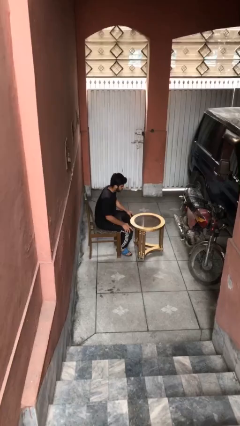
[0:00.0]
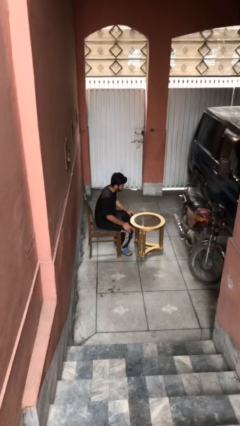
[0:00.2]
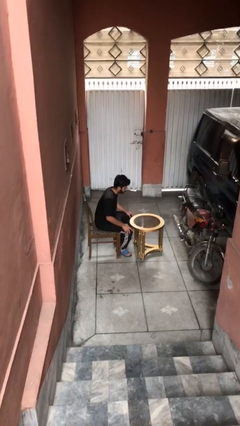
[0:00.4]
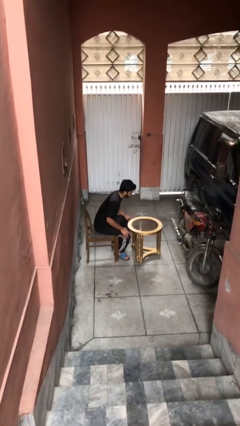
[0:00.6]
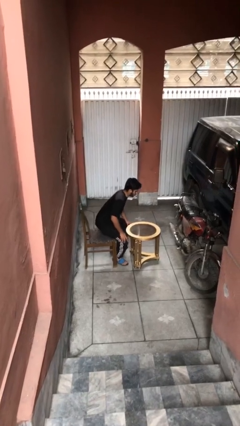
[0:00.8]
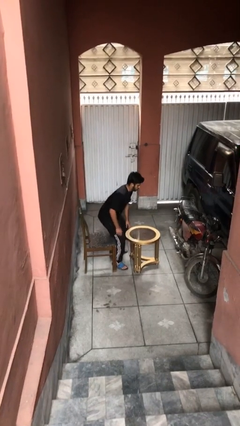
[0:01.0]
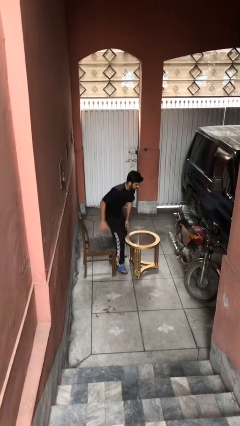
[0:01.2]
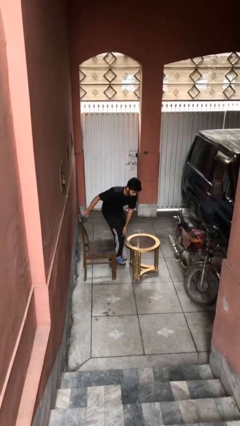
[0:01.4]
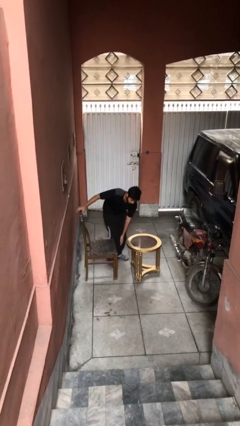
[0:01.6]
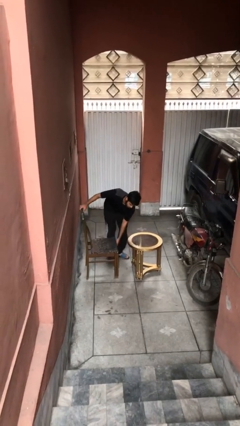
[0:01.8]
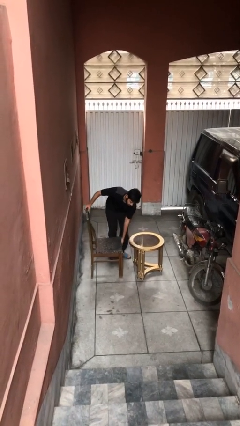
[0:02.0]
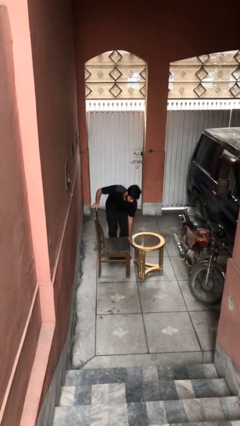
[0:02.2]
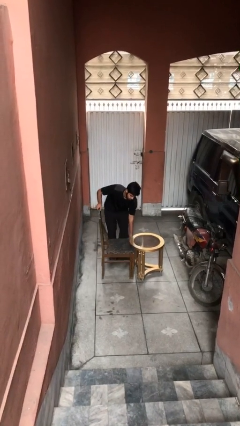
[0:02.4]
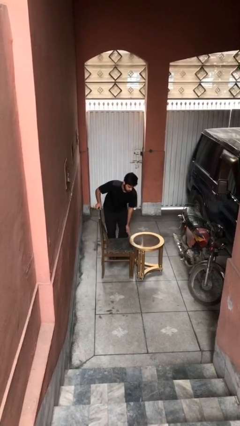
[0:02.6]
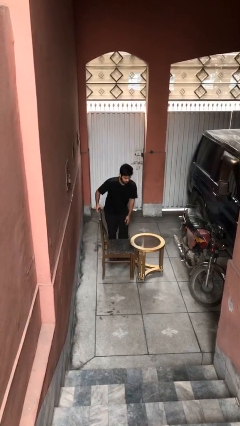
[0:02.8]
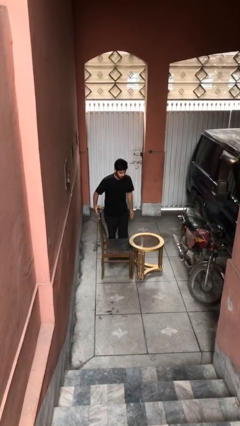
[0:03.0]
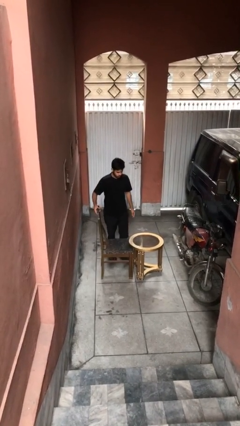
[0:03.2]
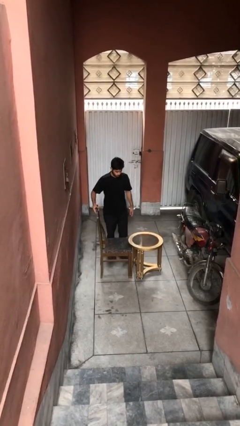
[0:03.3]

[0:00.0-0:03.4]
person stands up

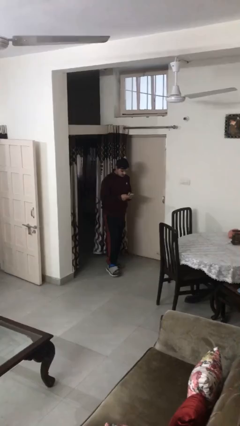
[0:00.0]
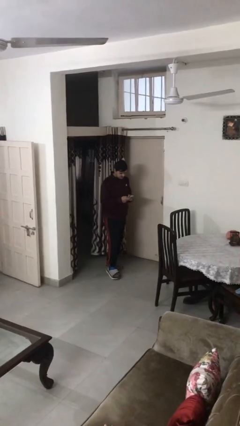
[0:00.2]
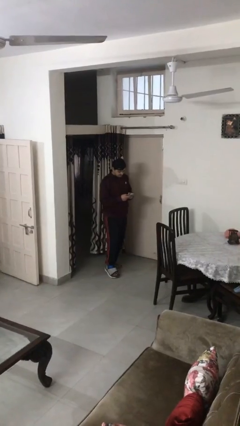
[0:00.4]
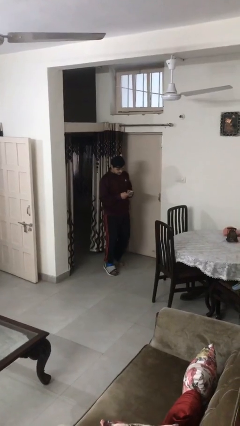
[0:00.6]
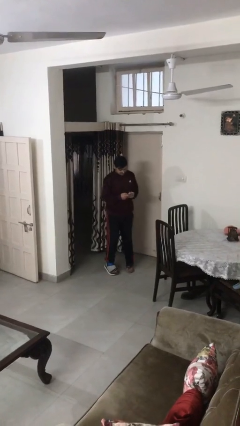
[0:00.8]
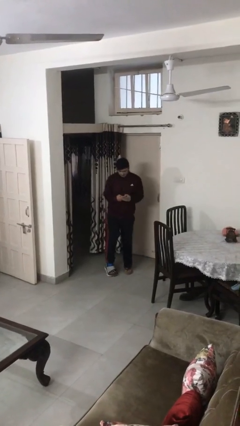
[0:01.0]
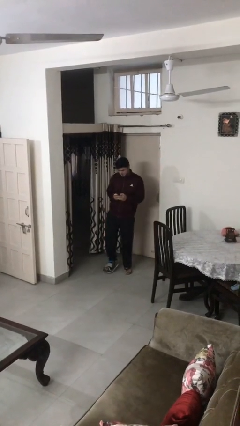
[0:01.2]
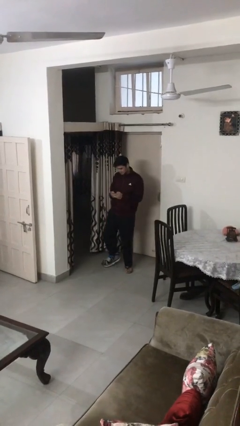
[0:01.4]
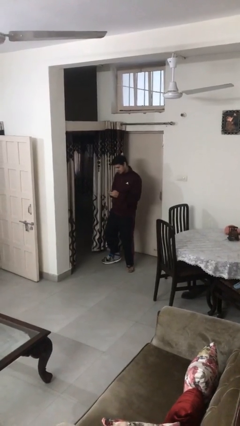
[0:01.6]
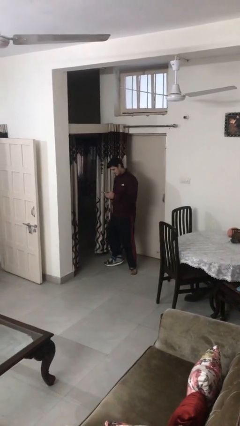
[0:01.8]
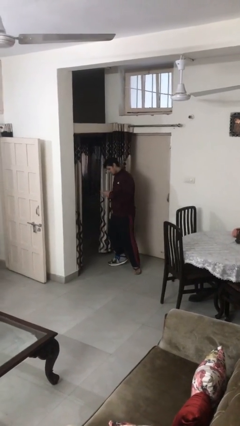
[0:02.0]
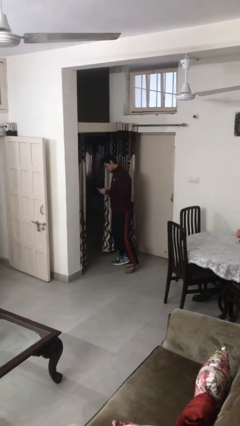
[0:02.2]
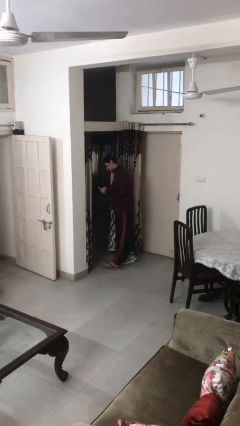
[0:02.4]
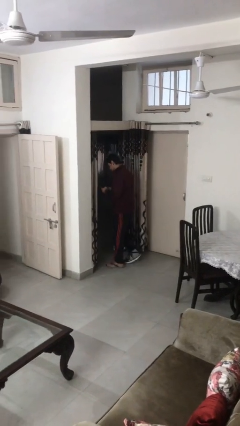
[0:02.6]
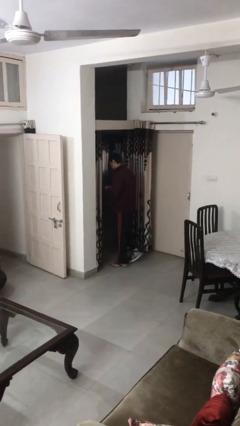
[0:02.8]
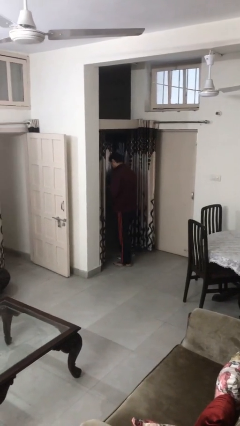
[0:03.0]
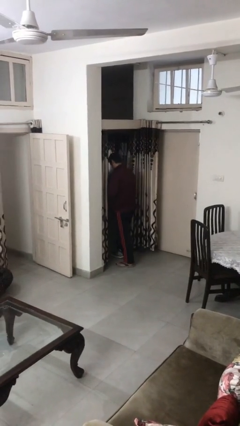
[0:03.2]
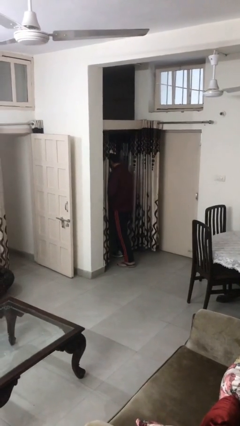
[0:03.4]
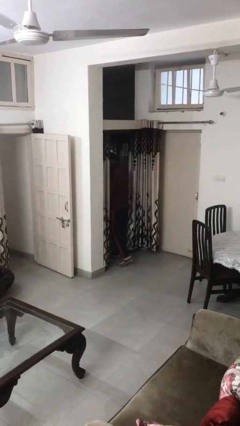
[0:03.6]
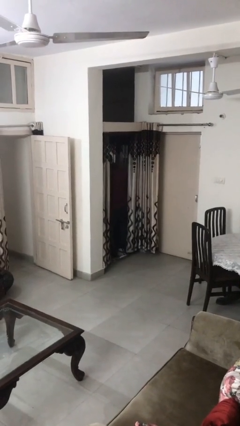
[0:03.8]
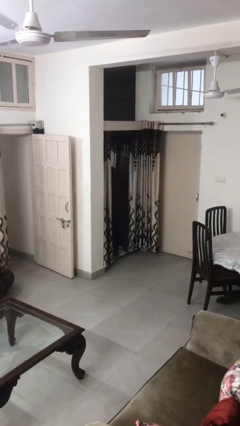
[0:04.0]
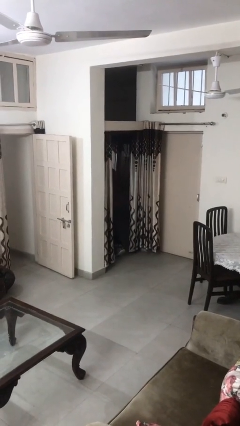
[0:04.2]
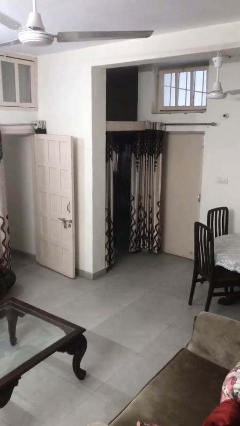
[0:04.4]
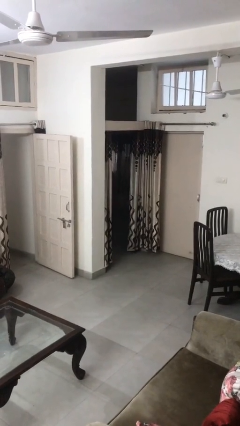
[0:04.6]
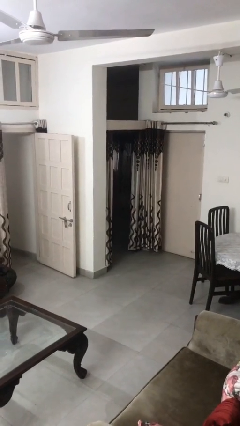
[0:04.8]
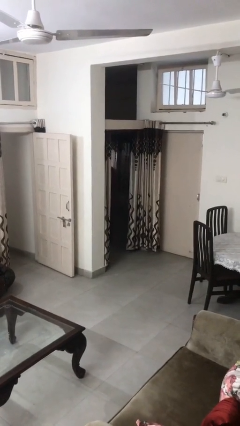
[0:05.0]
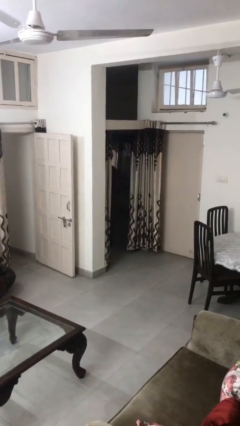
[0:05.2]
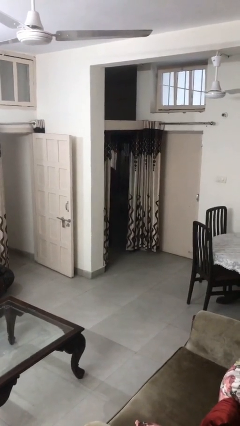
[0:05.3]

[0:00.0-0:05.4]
person exits scene through structure

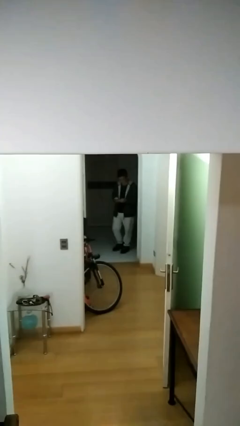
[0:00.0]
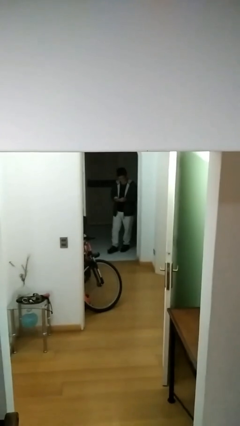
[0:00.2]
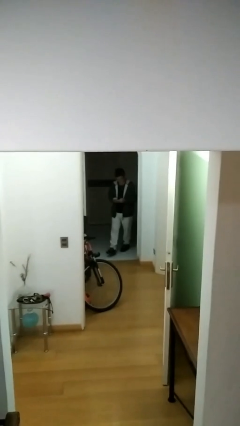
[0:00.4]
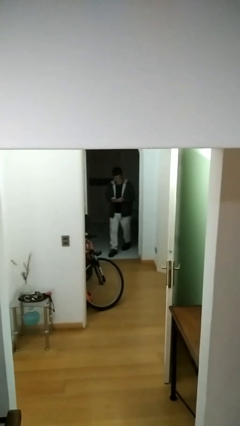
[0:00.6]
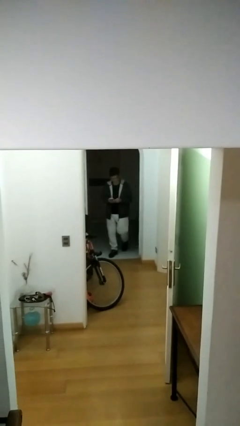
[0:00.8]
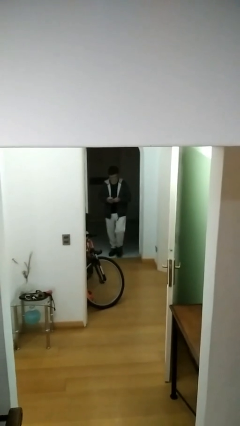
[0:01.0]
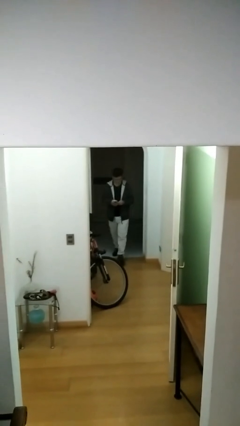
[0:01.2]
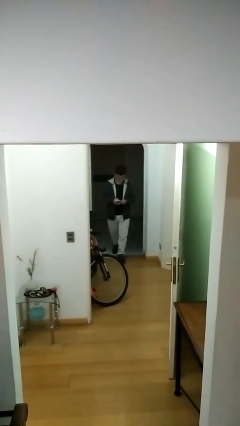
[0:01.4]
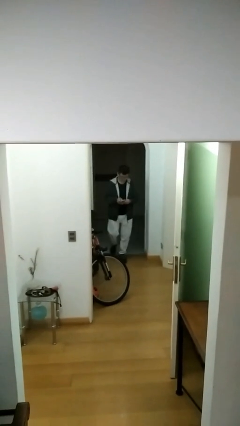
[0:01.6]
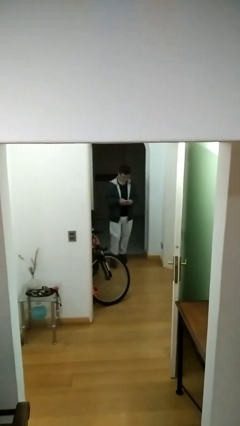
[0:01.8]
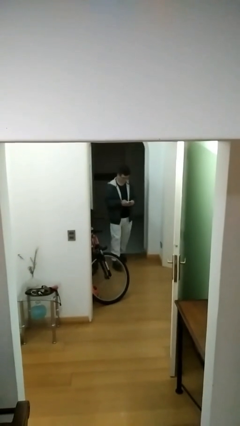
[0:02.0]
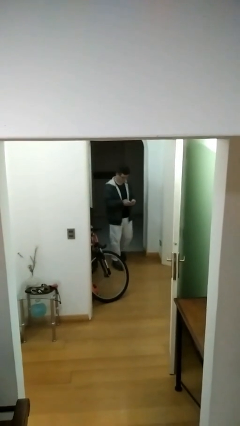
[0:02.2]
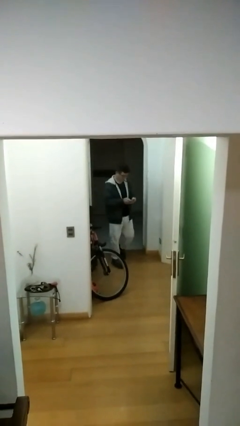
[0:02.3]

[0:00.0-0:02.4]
person enters scene through structure

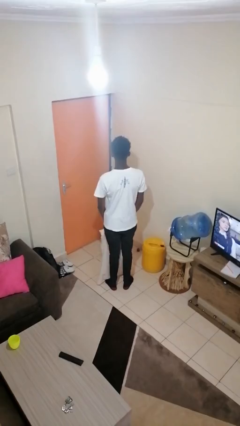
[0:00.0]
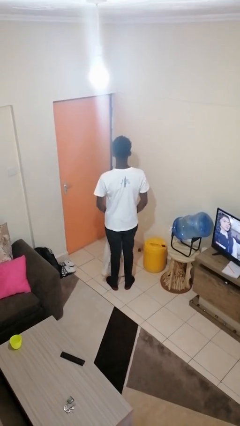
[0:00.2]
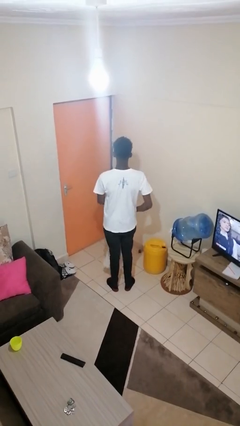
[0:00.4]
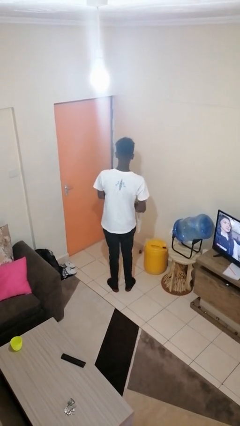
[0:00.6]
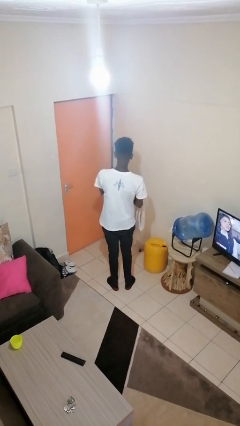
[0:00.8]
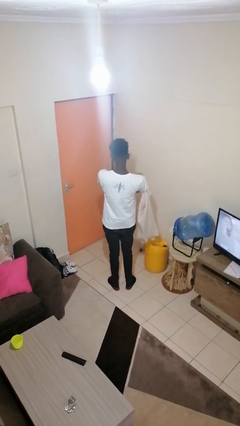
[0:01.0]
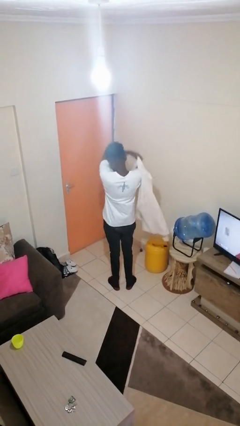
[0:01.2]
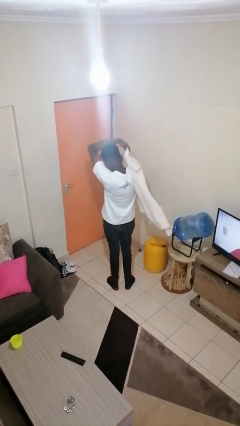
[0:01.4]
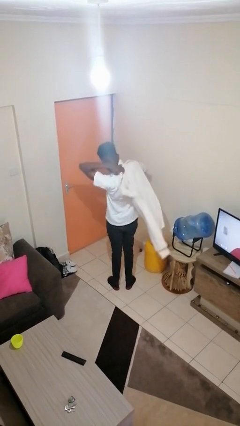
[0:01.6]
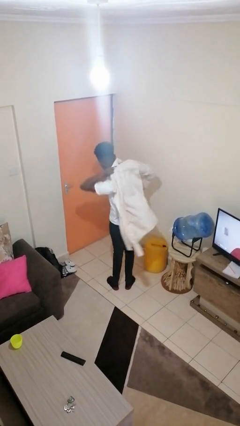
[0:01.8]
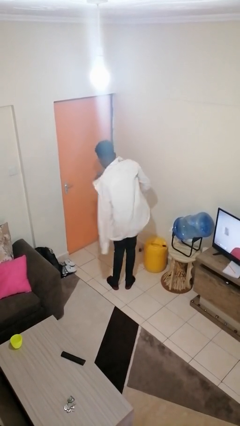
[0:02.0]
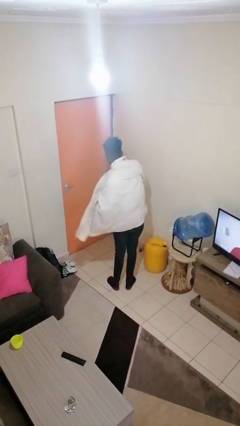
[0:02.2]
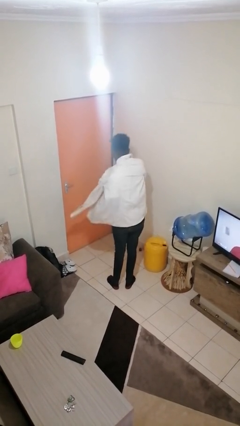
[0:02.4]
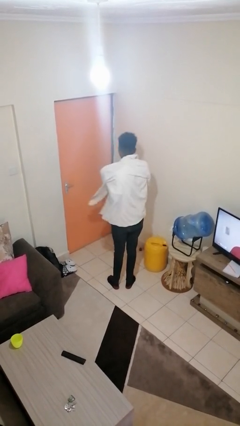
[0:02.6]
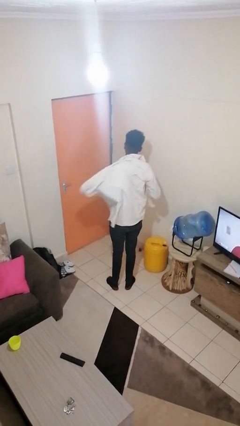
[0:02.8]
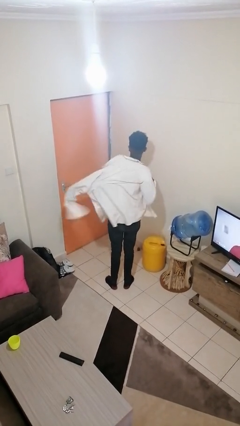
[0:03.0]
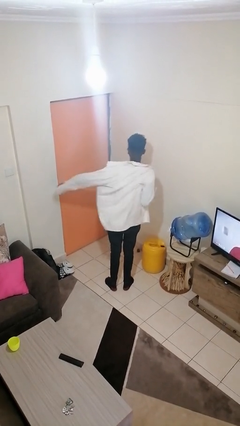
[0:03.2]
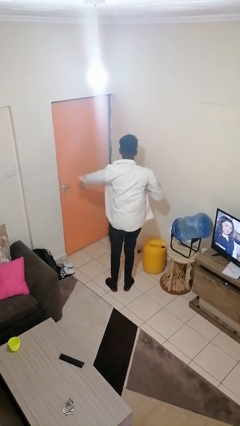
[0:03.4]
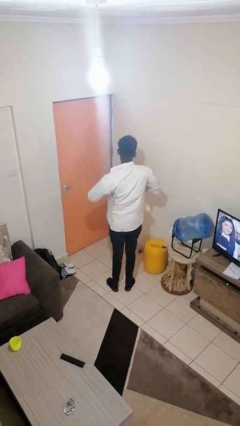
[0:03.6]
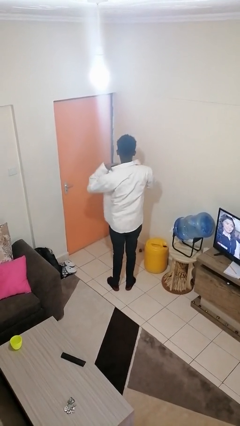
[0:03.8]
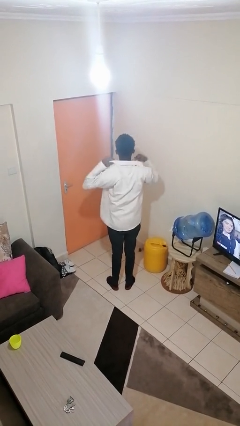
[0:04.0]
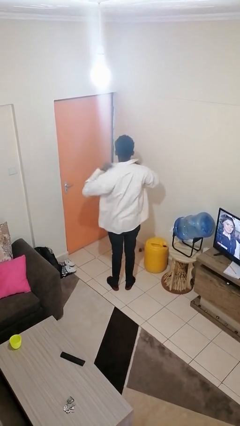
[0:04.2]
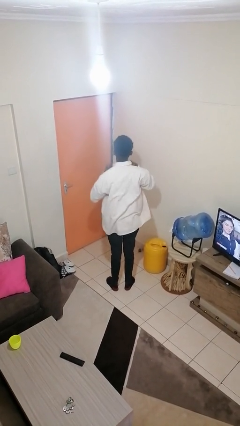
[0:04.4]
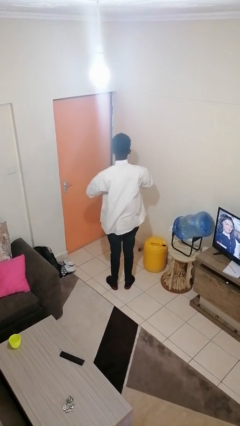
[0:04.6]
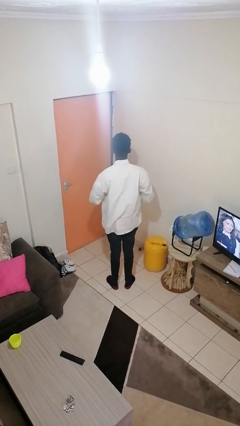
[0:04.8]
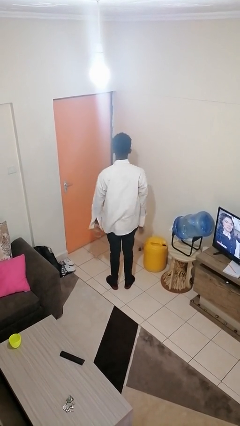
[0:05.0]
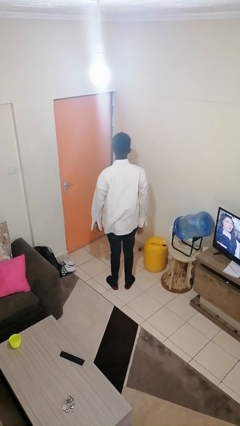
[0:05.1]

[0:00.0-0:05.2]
person puts on shirt

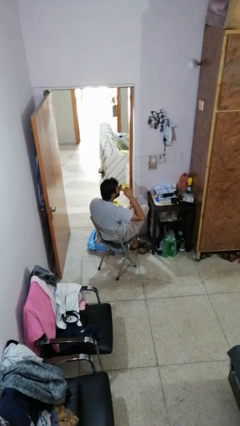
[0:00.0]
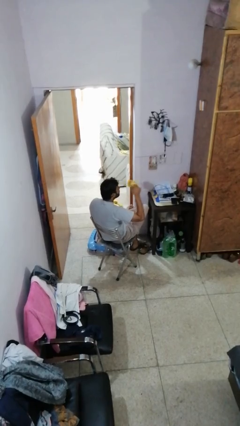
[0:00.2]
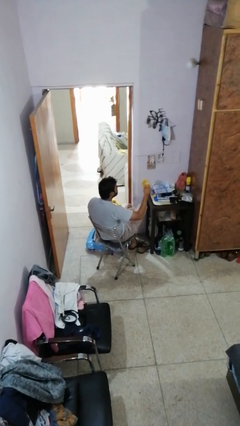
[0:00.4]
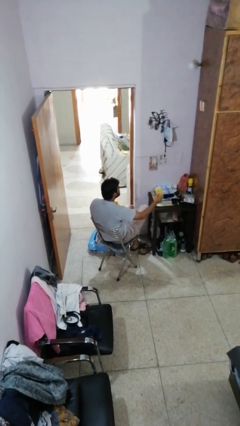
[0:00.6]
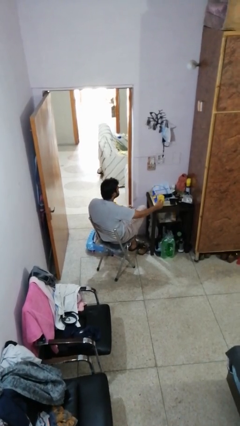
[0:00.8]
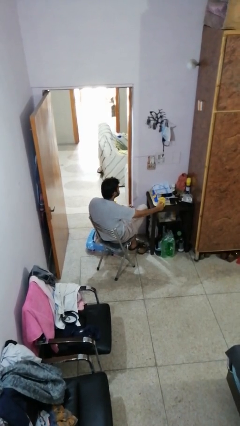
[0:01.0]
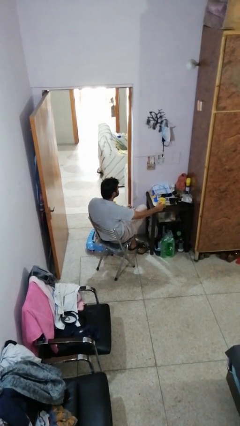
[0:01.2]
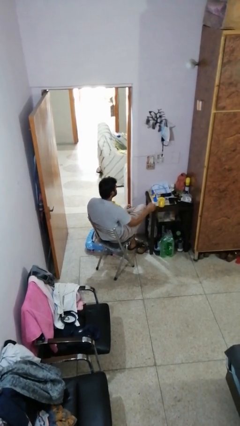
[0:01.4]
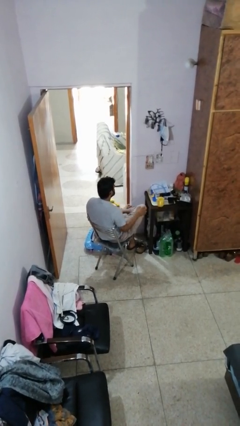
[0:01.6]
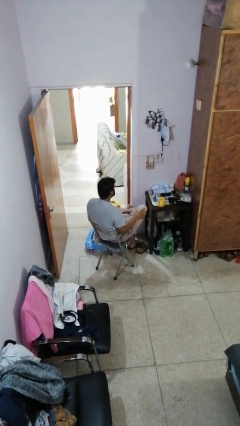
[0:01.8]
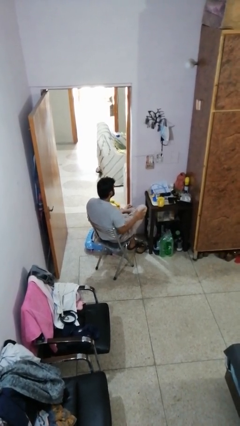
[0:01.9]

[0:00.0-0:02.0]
person puts down object on table
